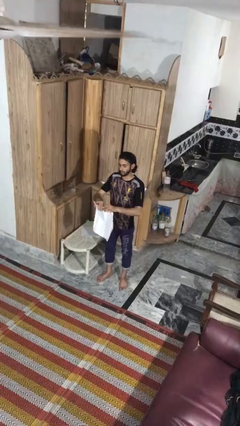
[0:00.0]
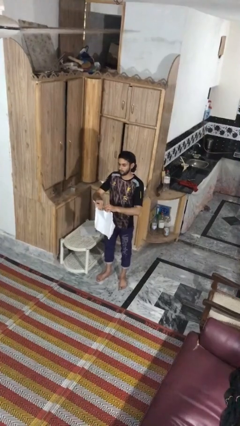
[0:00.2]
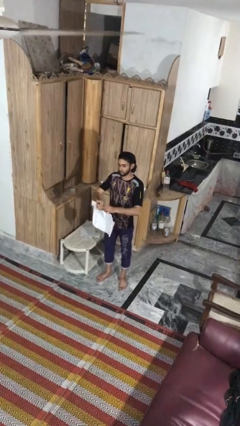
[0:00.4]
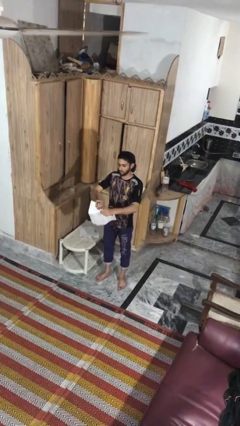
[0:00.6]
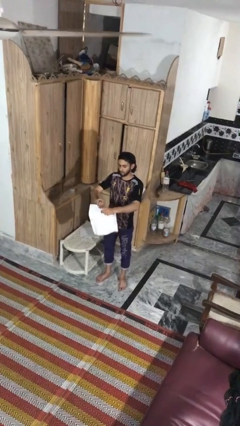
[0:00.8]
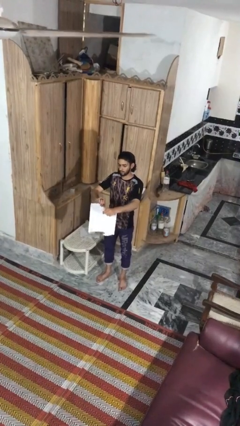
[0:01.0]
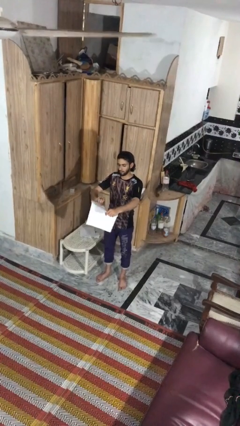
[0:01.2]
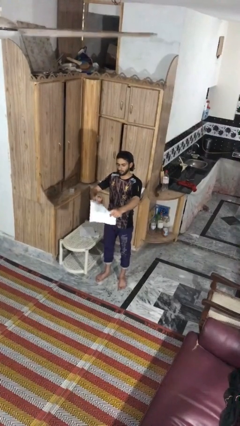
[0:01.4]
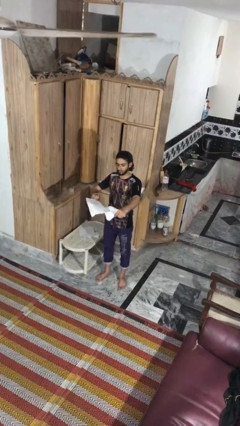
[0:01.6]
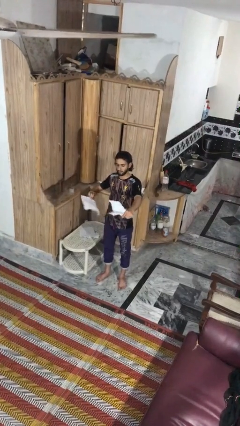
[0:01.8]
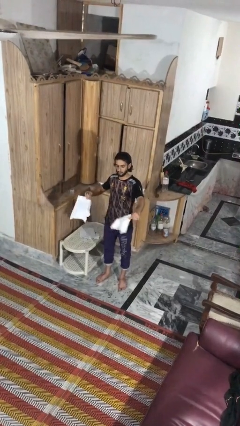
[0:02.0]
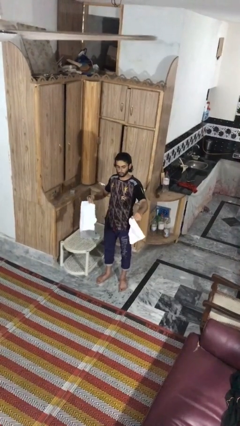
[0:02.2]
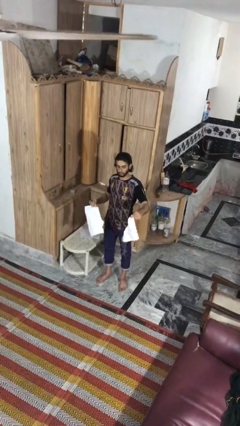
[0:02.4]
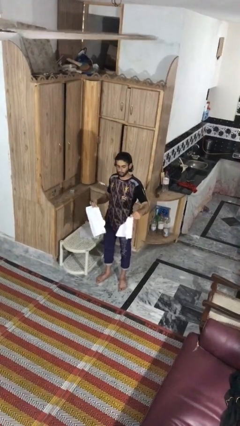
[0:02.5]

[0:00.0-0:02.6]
person tears paper

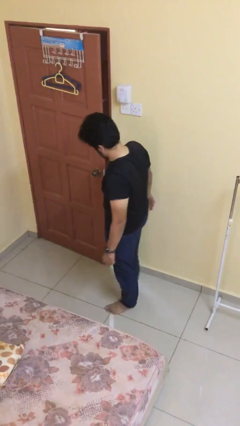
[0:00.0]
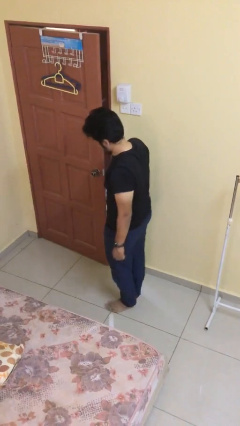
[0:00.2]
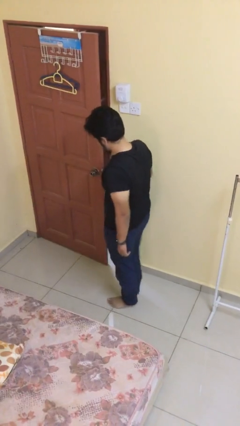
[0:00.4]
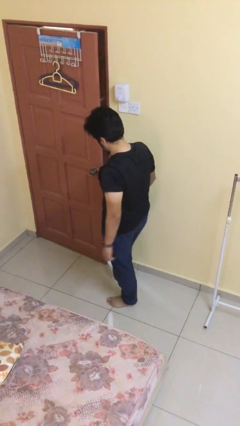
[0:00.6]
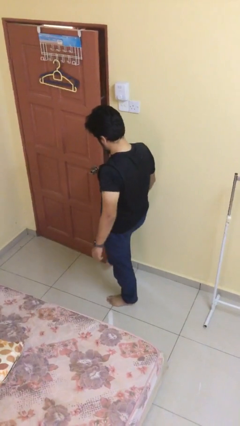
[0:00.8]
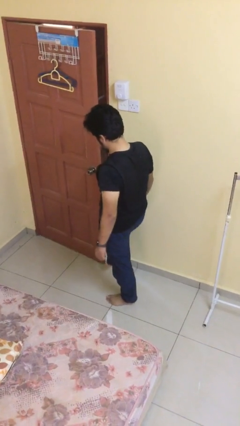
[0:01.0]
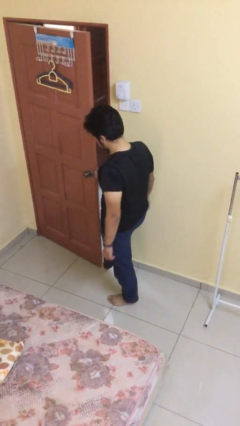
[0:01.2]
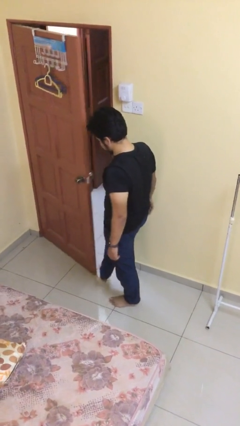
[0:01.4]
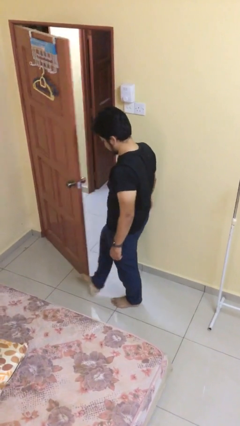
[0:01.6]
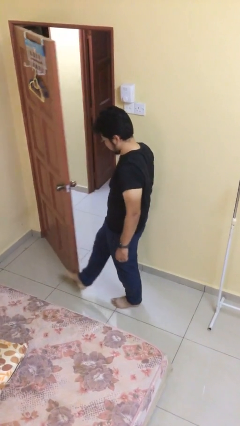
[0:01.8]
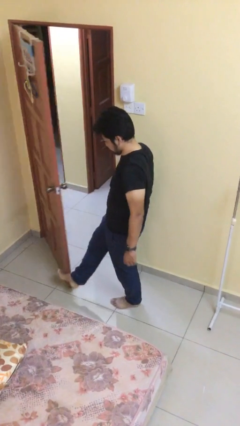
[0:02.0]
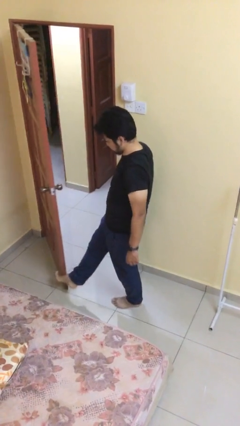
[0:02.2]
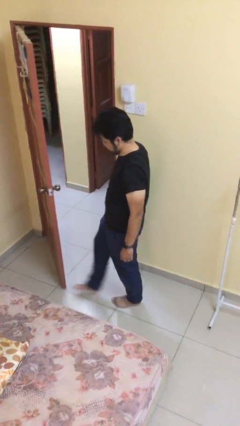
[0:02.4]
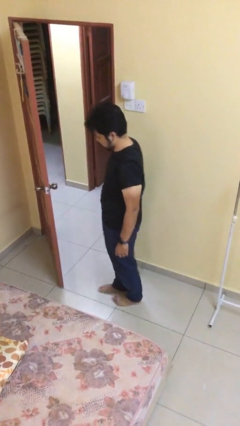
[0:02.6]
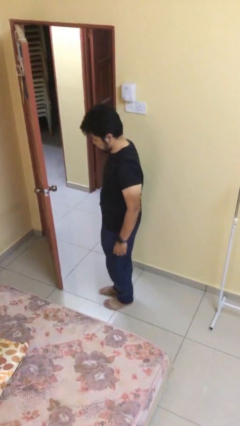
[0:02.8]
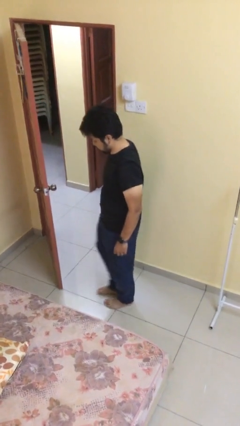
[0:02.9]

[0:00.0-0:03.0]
person opens facility door

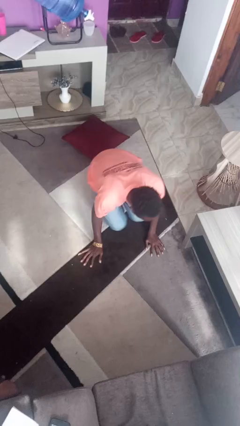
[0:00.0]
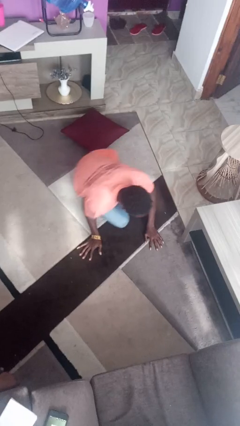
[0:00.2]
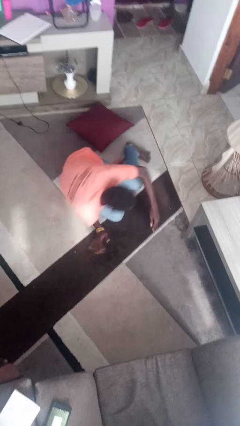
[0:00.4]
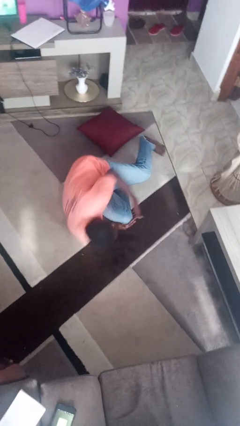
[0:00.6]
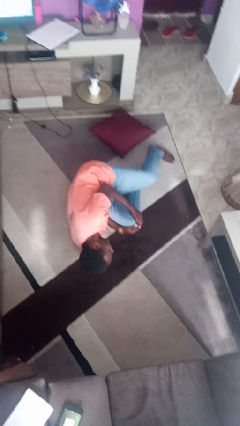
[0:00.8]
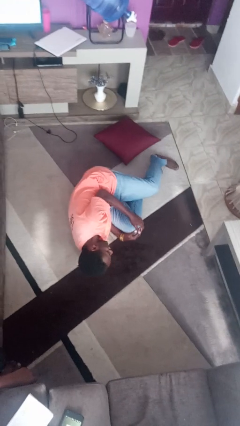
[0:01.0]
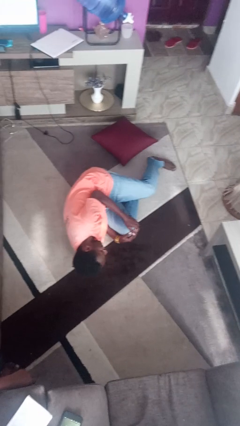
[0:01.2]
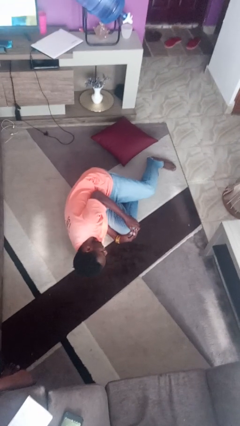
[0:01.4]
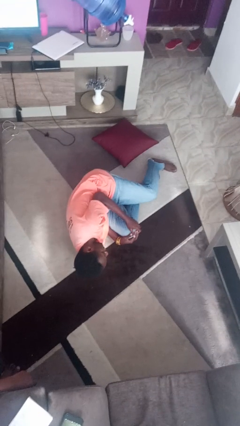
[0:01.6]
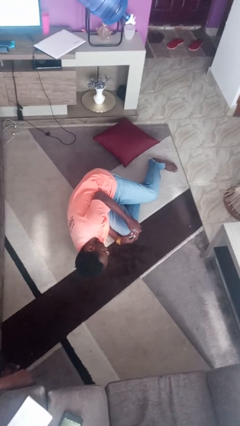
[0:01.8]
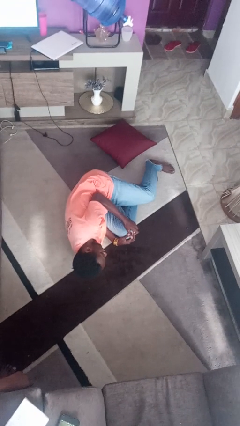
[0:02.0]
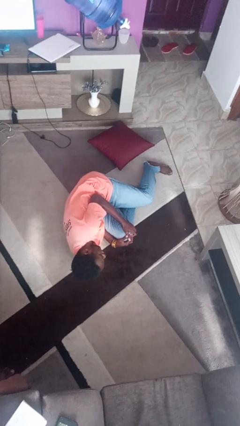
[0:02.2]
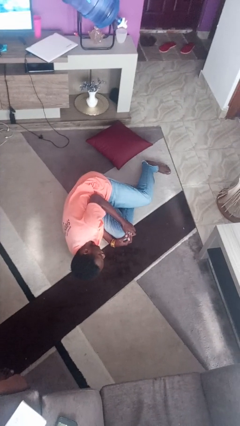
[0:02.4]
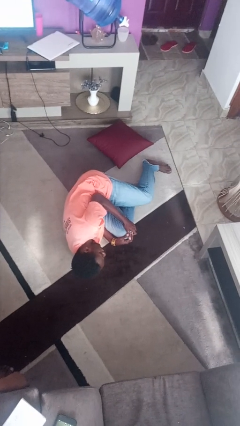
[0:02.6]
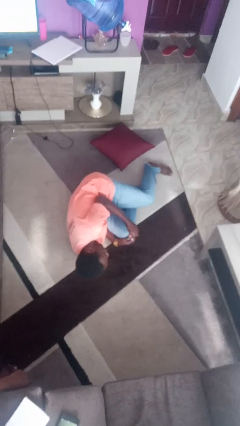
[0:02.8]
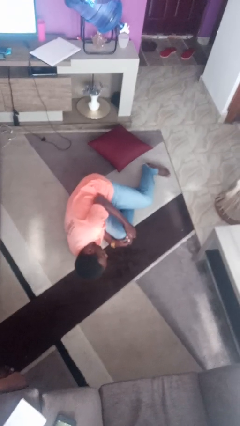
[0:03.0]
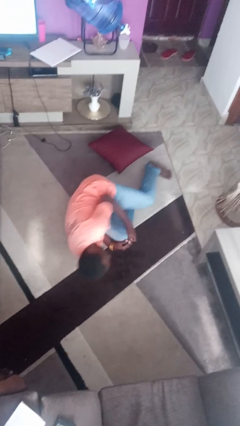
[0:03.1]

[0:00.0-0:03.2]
person lies down on floor

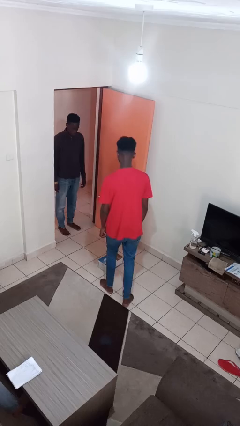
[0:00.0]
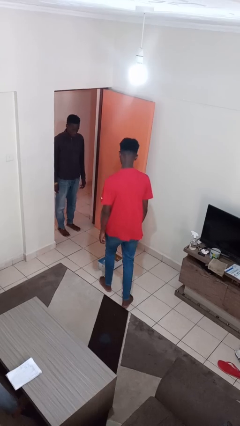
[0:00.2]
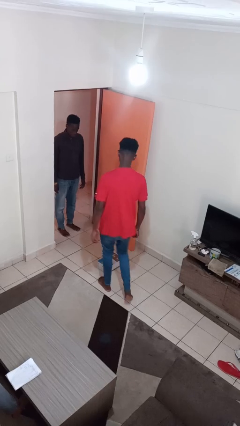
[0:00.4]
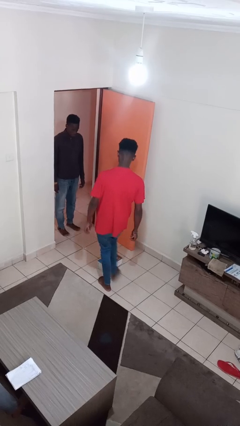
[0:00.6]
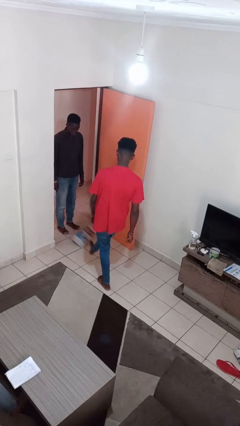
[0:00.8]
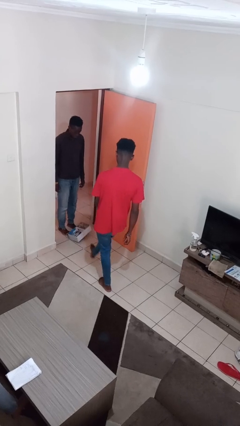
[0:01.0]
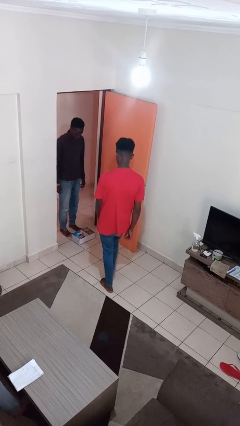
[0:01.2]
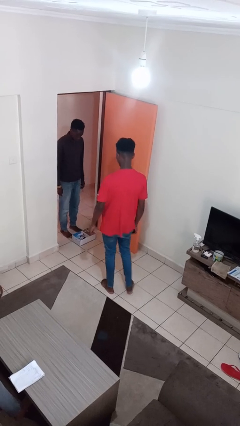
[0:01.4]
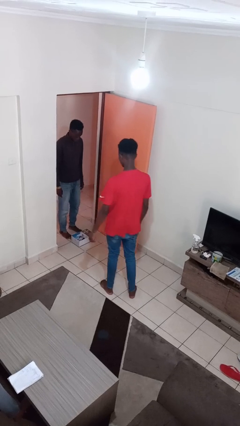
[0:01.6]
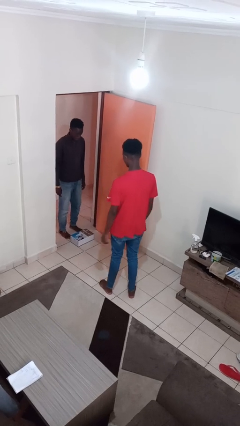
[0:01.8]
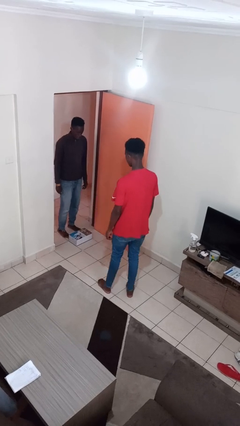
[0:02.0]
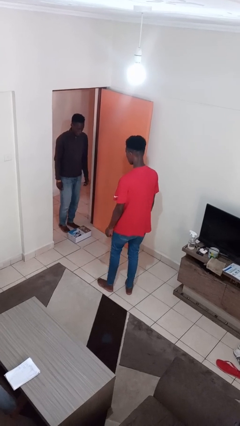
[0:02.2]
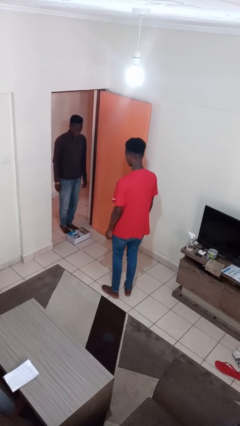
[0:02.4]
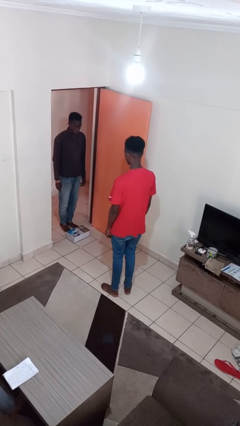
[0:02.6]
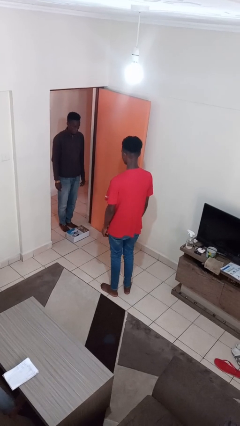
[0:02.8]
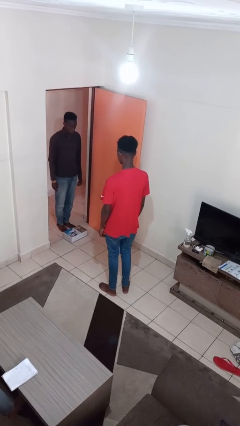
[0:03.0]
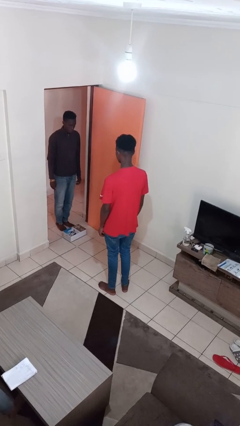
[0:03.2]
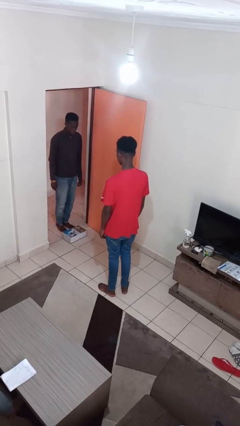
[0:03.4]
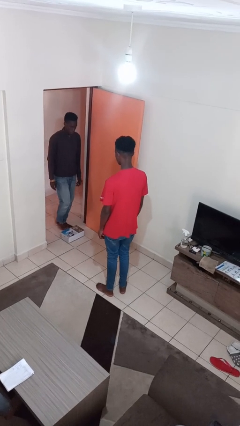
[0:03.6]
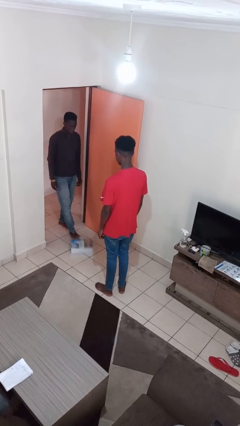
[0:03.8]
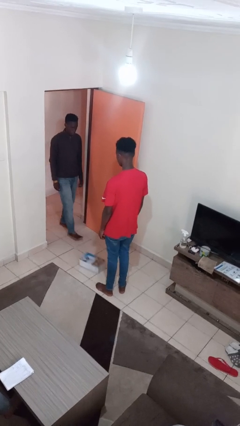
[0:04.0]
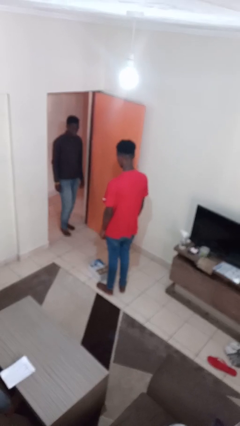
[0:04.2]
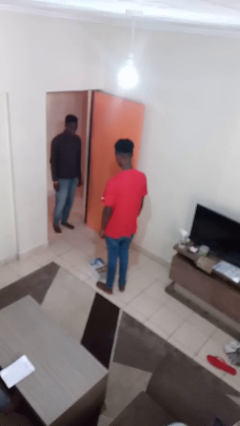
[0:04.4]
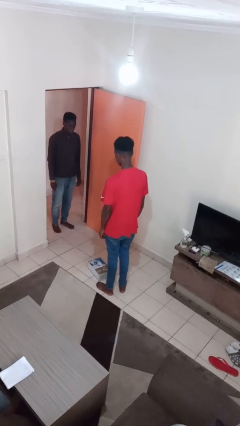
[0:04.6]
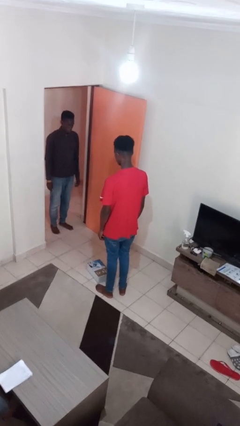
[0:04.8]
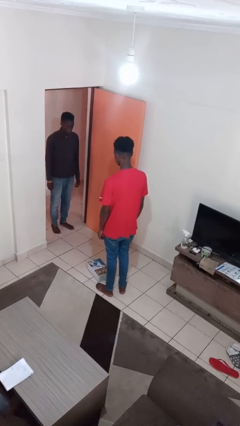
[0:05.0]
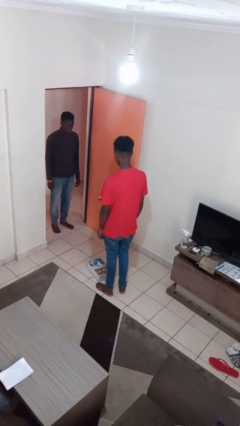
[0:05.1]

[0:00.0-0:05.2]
person kicks object to person

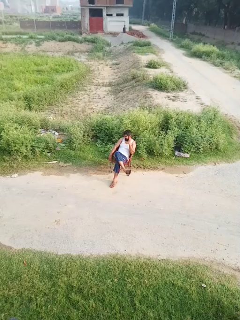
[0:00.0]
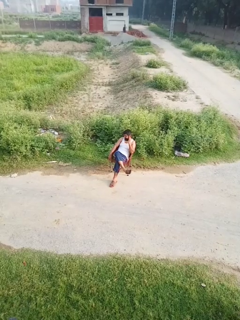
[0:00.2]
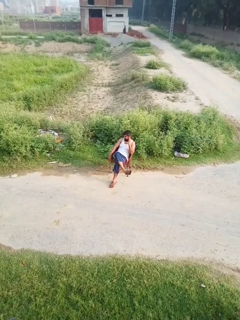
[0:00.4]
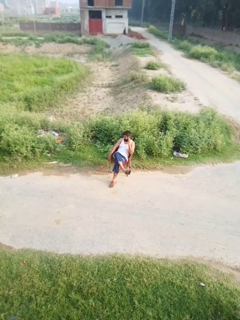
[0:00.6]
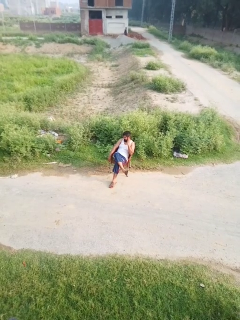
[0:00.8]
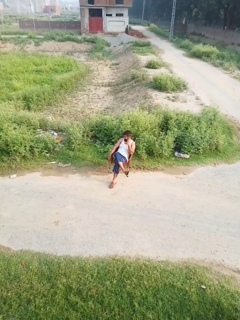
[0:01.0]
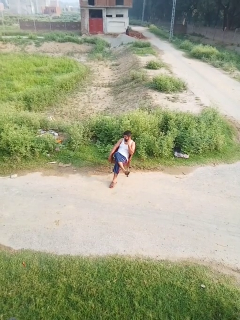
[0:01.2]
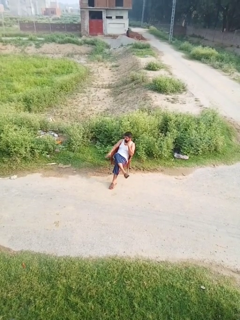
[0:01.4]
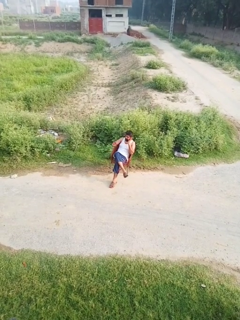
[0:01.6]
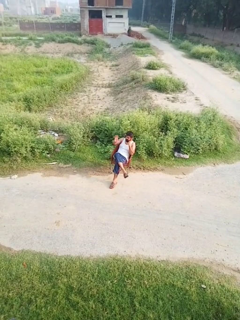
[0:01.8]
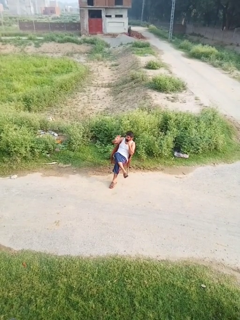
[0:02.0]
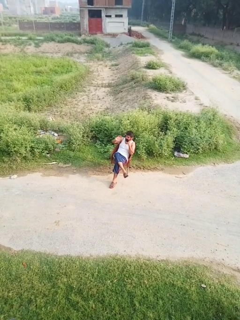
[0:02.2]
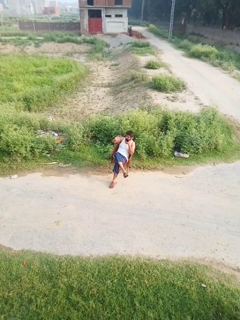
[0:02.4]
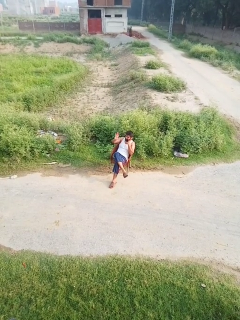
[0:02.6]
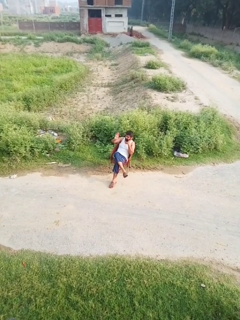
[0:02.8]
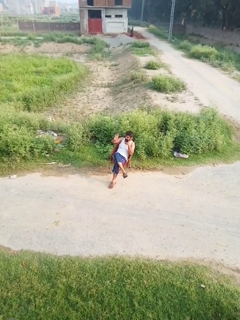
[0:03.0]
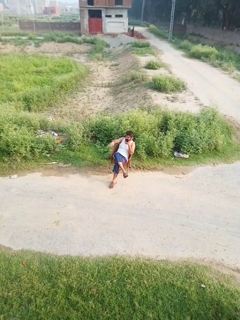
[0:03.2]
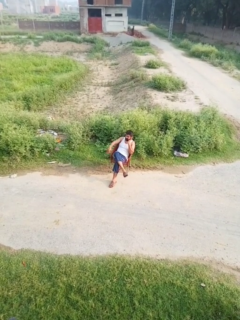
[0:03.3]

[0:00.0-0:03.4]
person waves at person

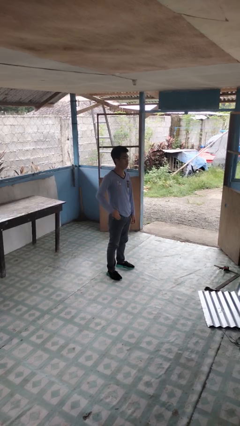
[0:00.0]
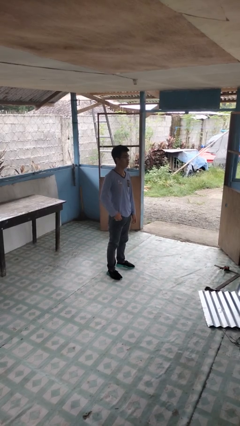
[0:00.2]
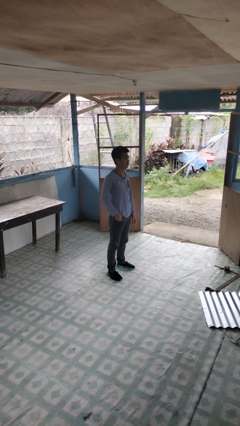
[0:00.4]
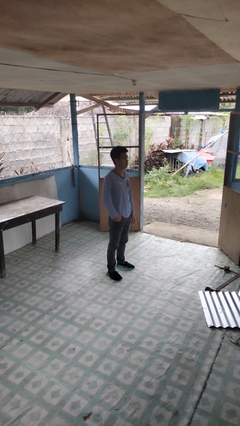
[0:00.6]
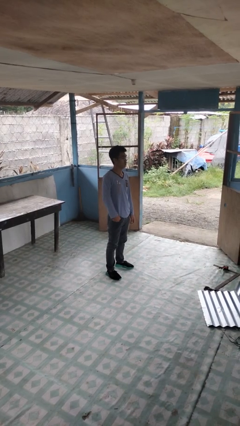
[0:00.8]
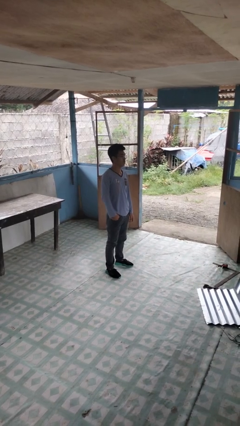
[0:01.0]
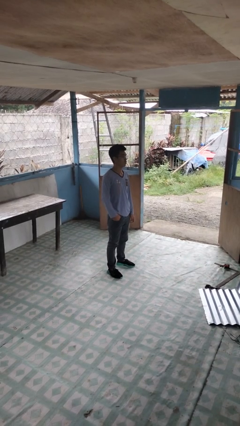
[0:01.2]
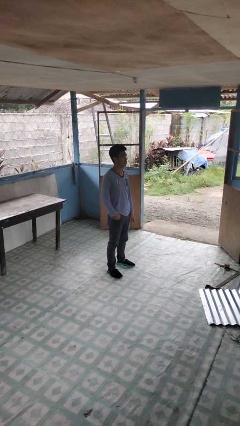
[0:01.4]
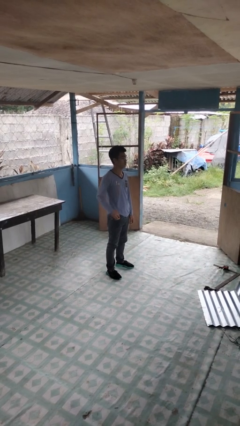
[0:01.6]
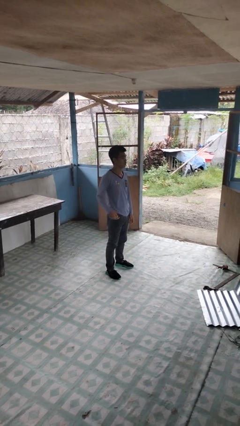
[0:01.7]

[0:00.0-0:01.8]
person puts hands in back pockets
